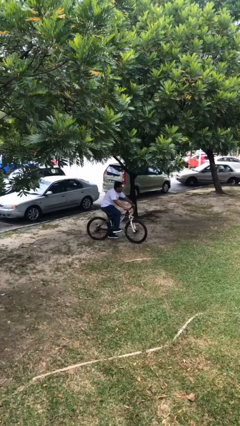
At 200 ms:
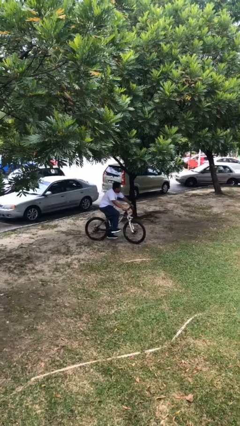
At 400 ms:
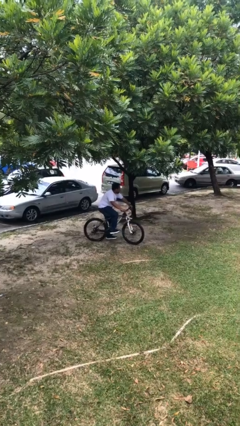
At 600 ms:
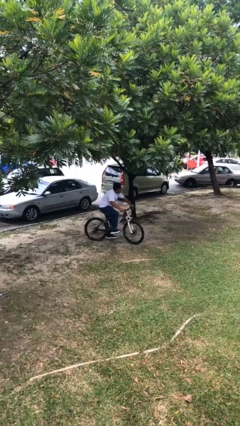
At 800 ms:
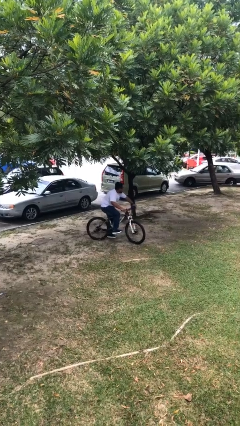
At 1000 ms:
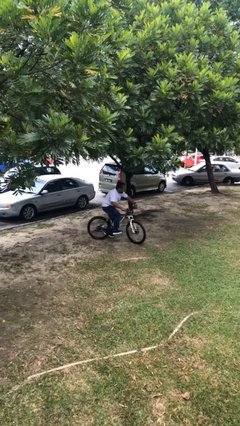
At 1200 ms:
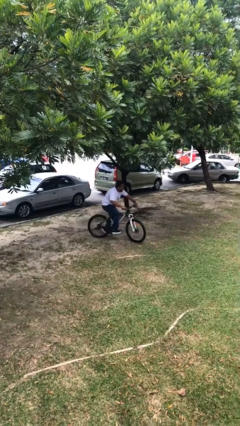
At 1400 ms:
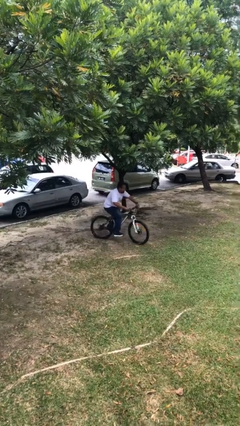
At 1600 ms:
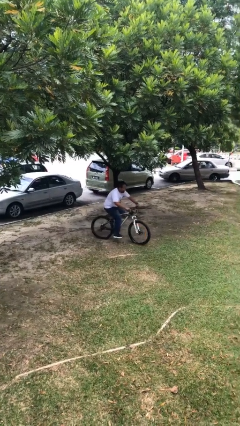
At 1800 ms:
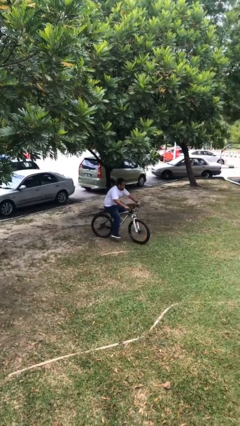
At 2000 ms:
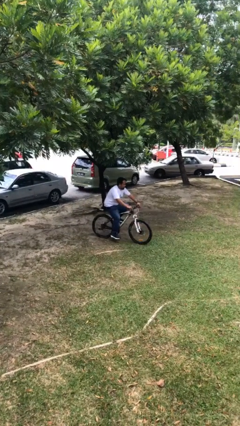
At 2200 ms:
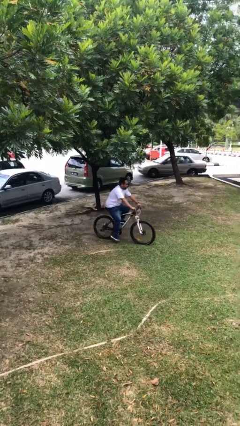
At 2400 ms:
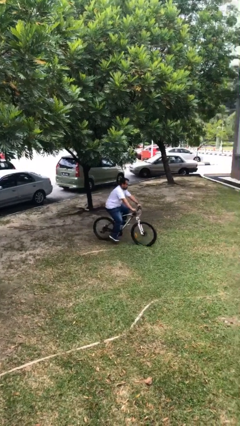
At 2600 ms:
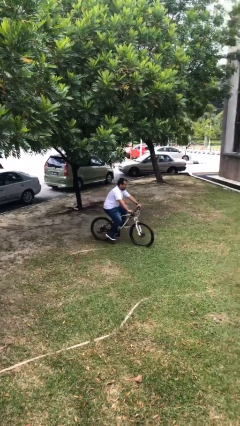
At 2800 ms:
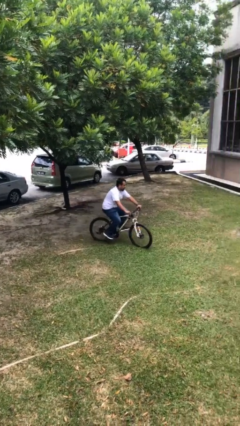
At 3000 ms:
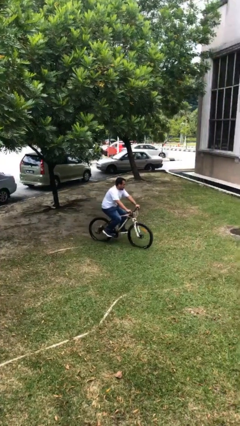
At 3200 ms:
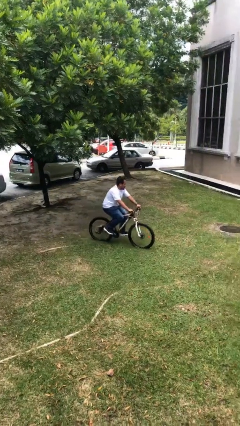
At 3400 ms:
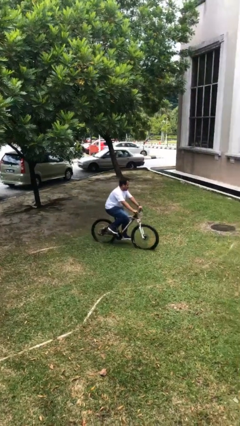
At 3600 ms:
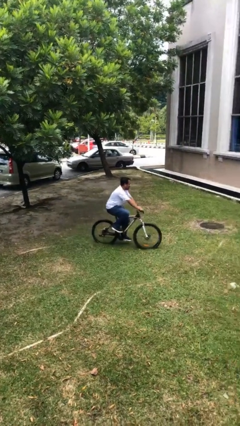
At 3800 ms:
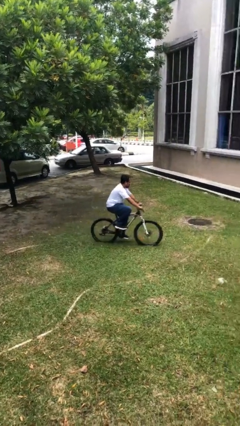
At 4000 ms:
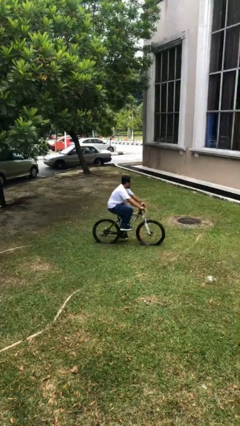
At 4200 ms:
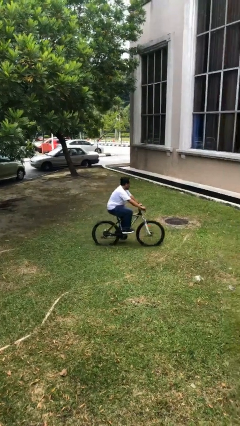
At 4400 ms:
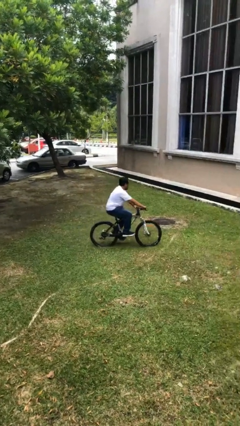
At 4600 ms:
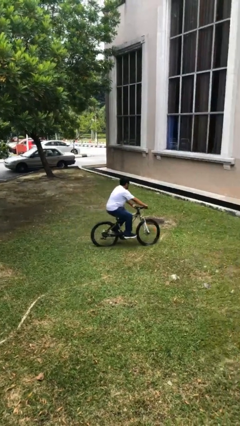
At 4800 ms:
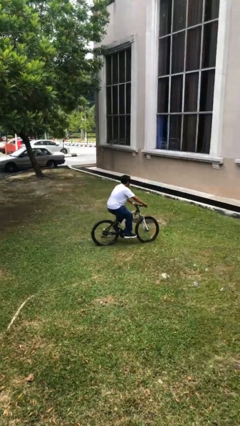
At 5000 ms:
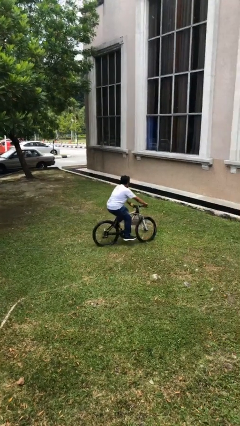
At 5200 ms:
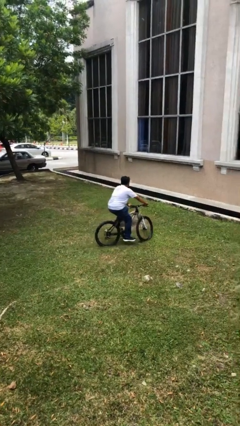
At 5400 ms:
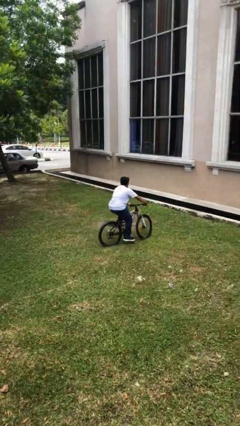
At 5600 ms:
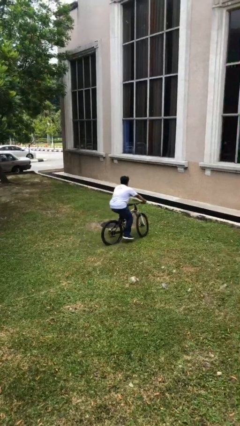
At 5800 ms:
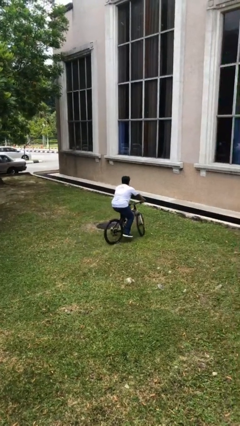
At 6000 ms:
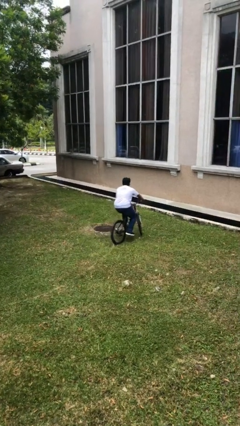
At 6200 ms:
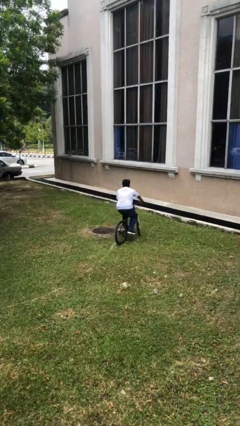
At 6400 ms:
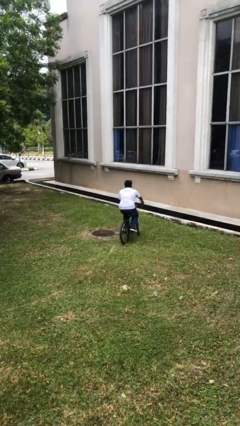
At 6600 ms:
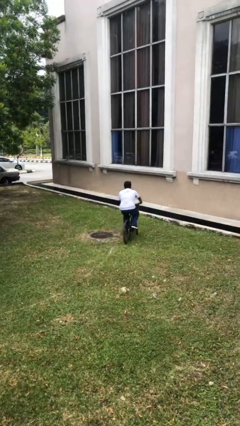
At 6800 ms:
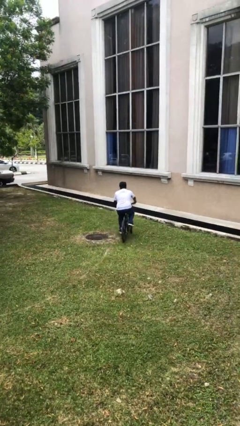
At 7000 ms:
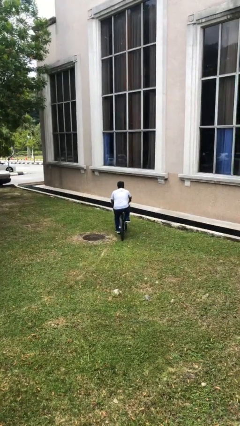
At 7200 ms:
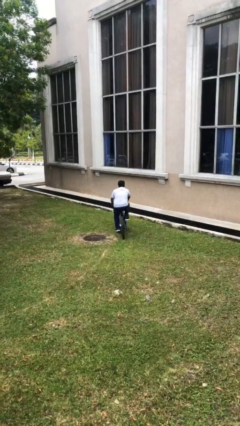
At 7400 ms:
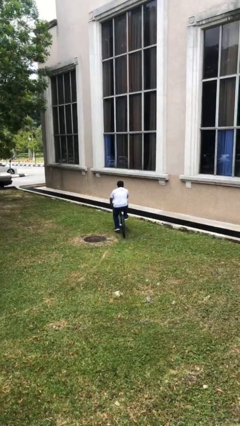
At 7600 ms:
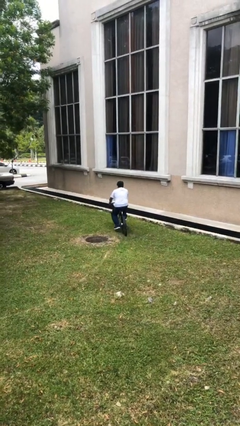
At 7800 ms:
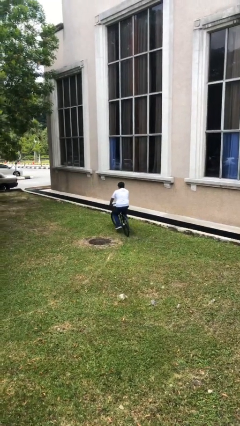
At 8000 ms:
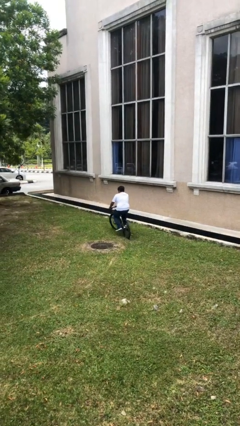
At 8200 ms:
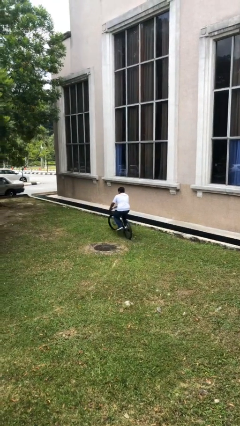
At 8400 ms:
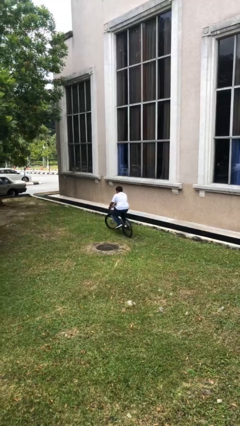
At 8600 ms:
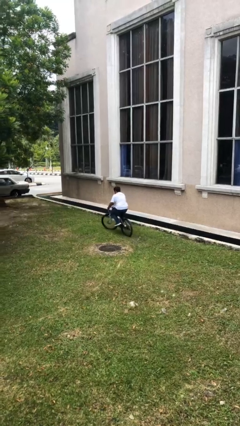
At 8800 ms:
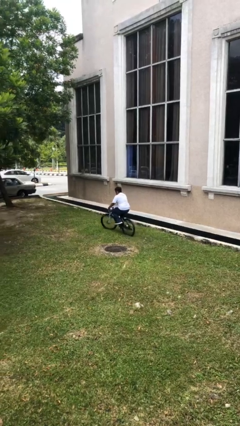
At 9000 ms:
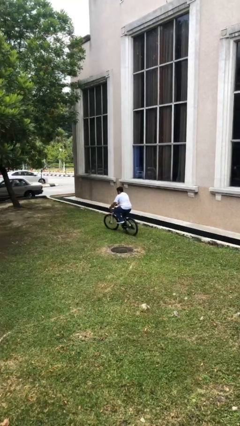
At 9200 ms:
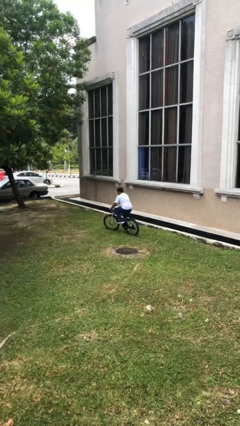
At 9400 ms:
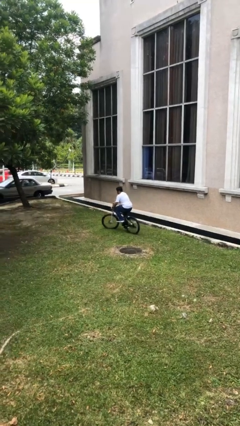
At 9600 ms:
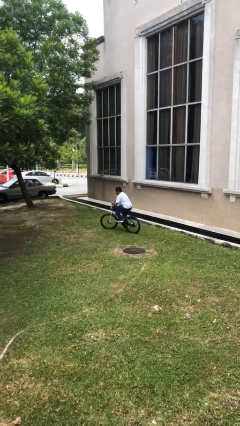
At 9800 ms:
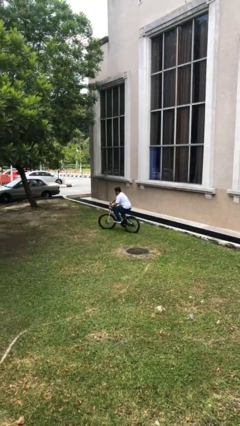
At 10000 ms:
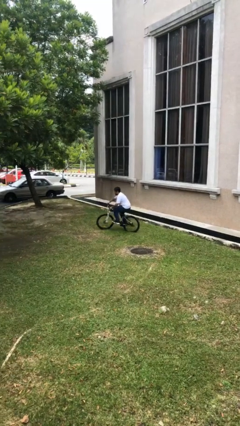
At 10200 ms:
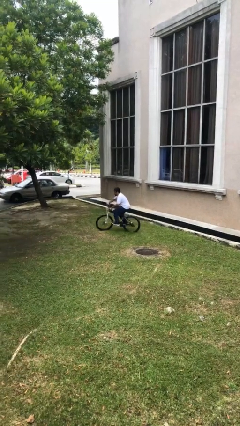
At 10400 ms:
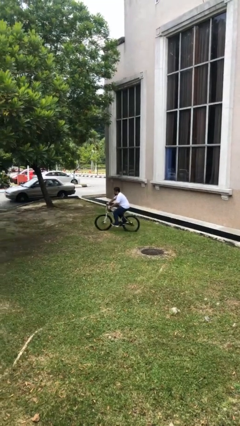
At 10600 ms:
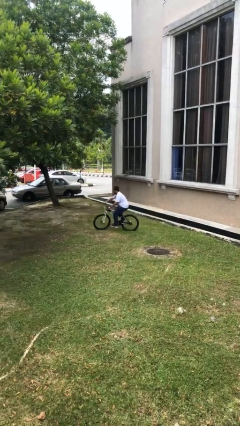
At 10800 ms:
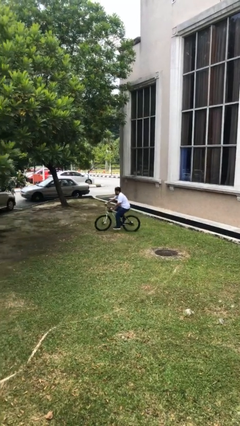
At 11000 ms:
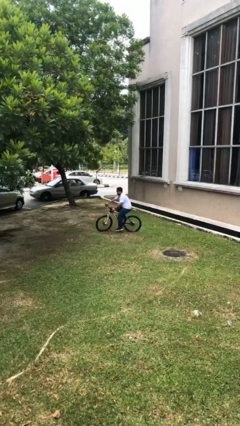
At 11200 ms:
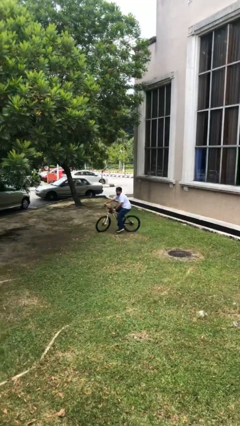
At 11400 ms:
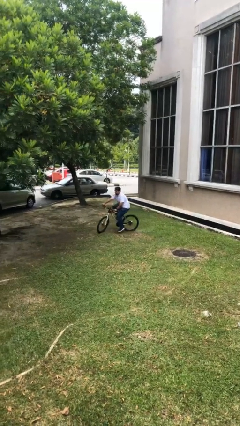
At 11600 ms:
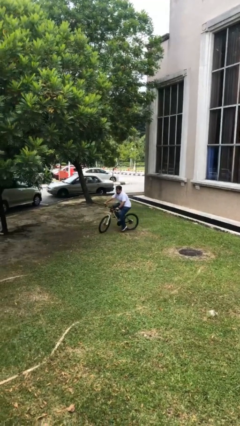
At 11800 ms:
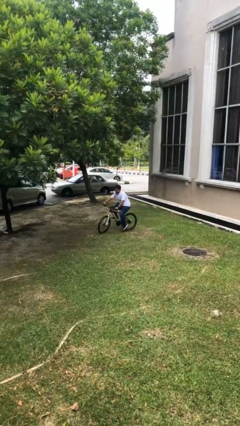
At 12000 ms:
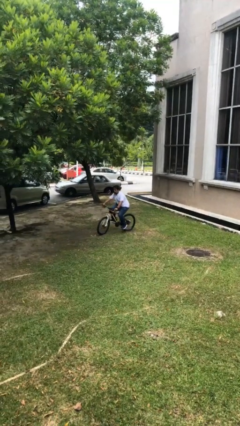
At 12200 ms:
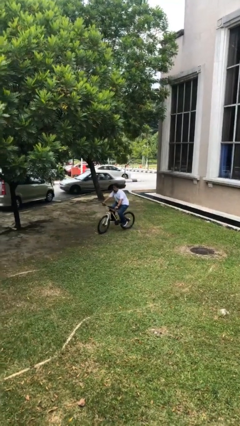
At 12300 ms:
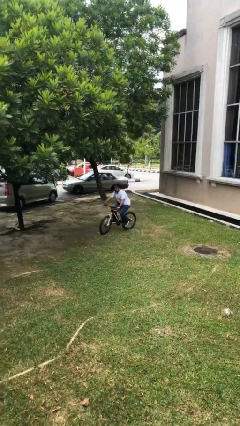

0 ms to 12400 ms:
person rides bicycle

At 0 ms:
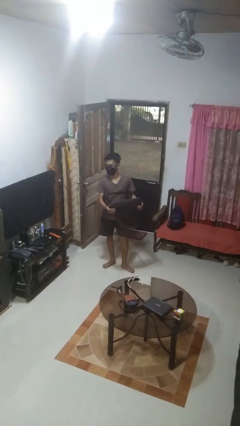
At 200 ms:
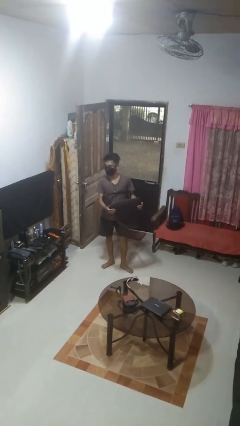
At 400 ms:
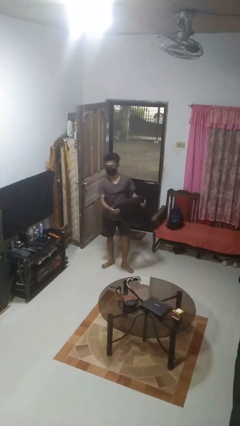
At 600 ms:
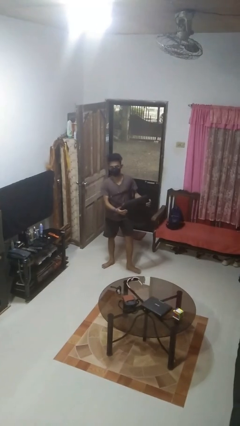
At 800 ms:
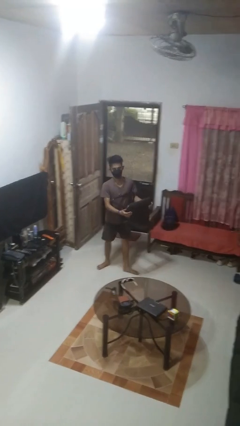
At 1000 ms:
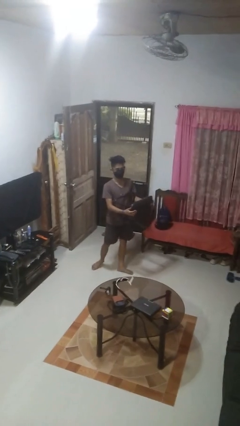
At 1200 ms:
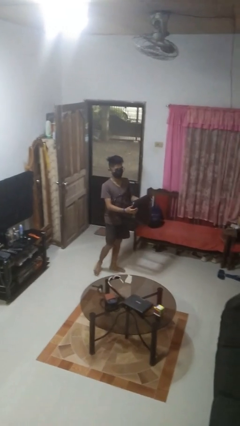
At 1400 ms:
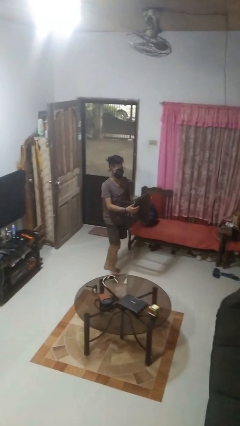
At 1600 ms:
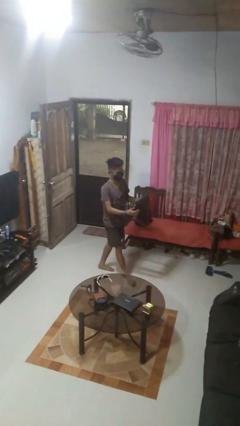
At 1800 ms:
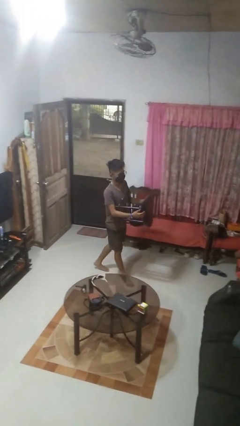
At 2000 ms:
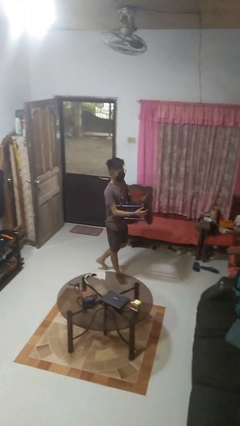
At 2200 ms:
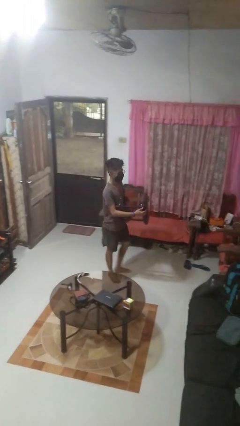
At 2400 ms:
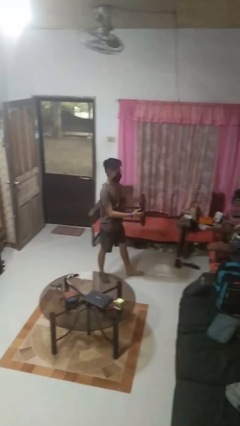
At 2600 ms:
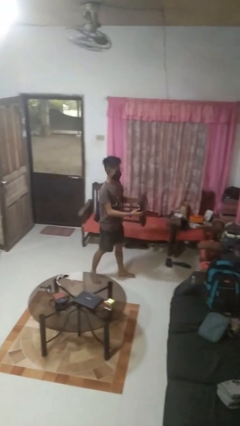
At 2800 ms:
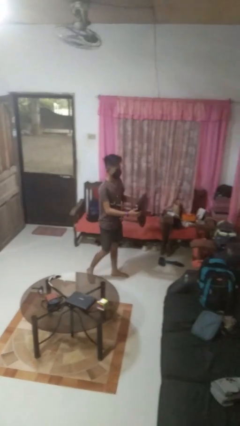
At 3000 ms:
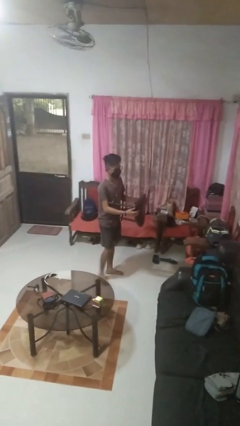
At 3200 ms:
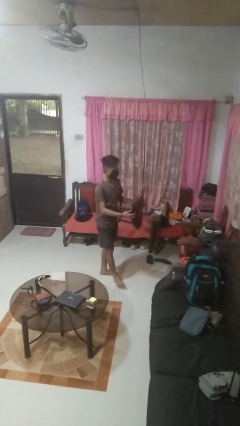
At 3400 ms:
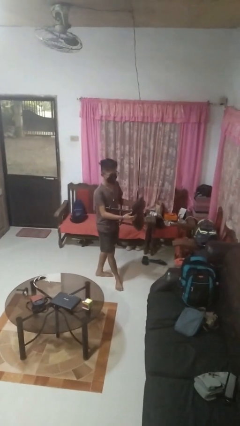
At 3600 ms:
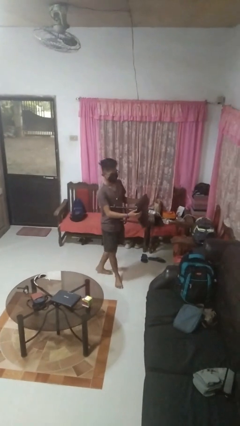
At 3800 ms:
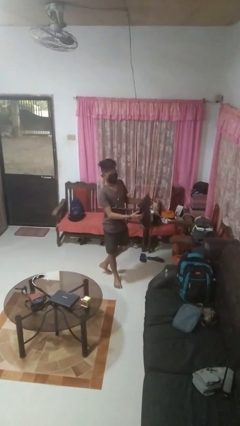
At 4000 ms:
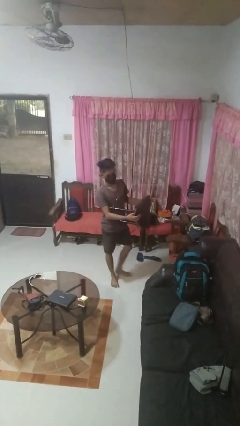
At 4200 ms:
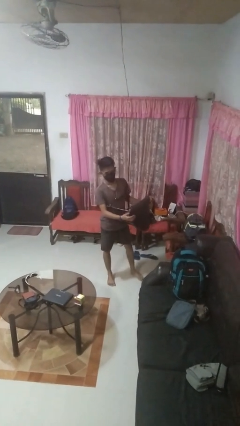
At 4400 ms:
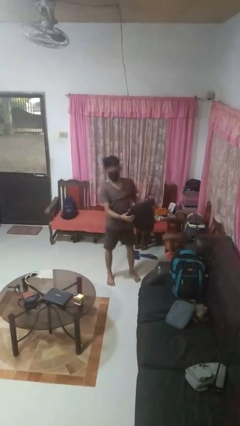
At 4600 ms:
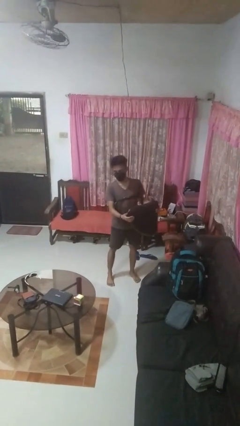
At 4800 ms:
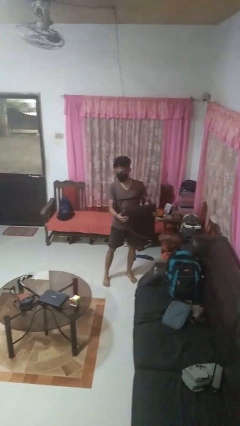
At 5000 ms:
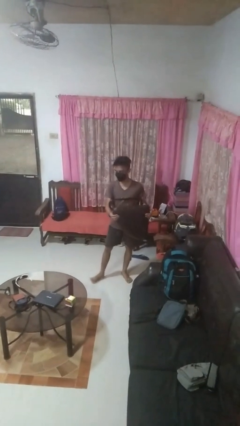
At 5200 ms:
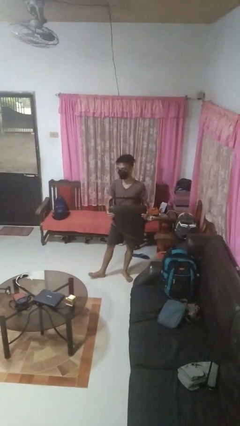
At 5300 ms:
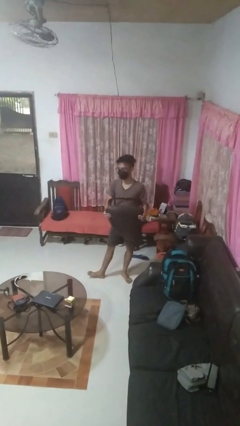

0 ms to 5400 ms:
person carries furniture

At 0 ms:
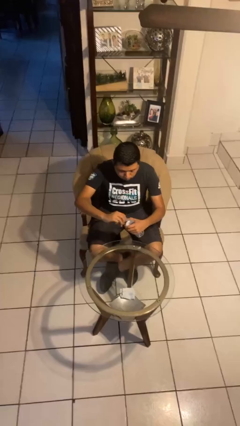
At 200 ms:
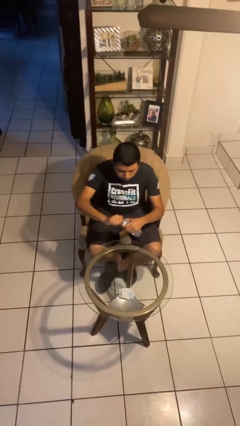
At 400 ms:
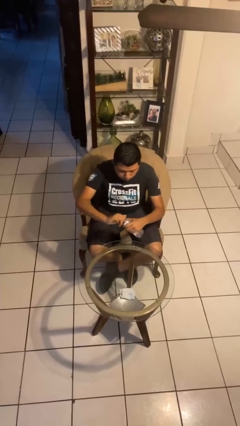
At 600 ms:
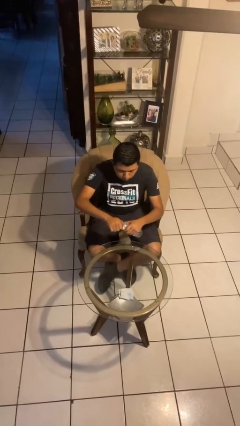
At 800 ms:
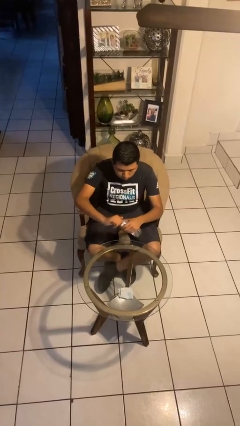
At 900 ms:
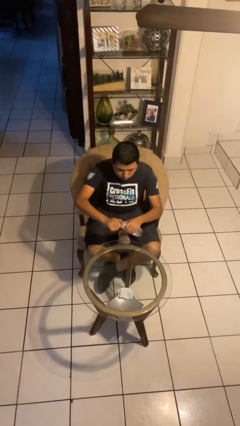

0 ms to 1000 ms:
person screws lid to bottle
